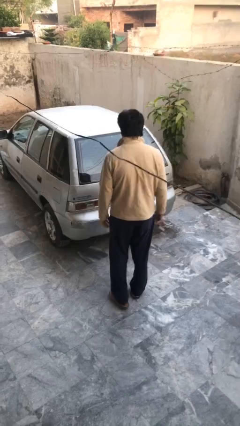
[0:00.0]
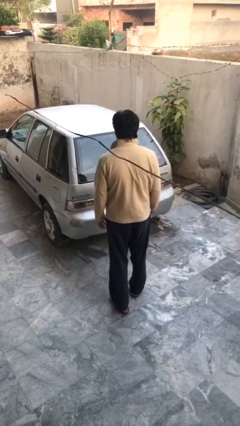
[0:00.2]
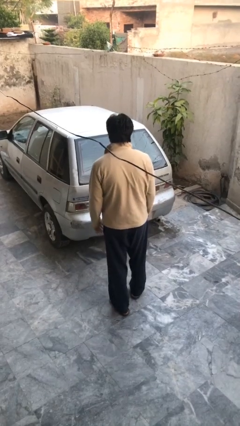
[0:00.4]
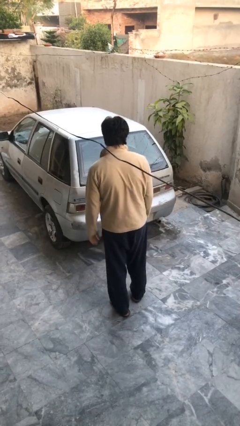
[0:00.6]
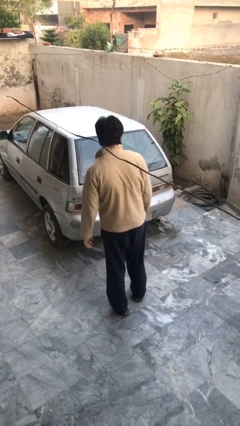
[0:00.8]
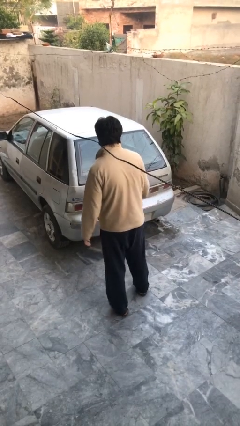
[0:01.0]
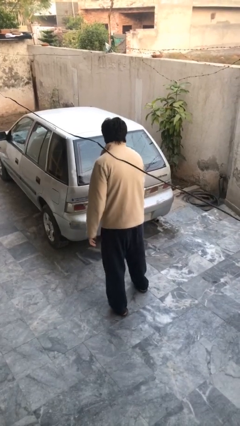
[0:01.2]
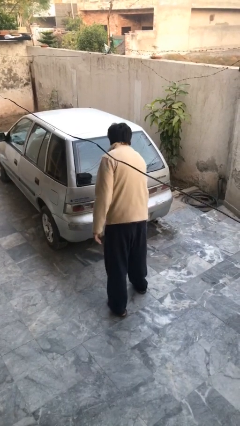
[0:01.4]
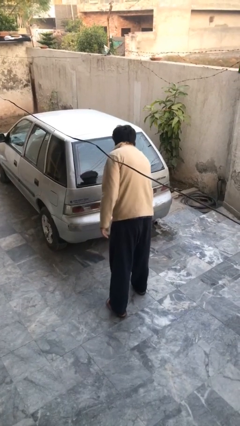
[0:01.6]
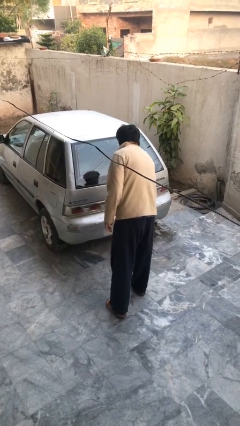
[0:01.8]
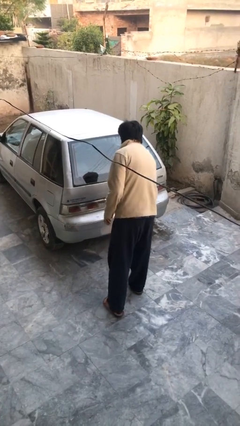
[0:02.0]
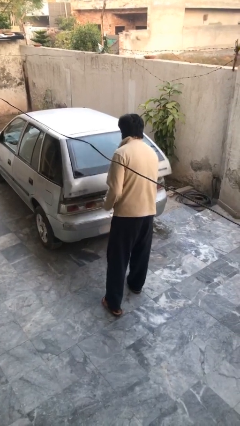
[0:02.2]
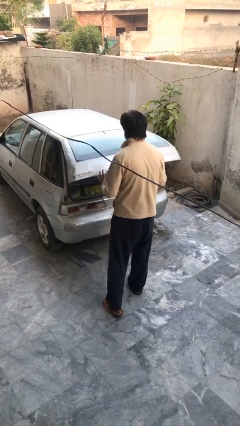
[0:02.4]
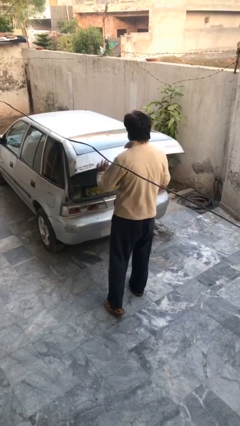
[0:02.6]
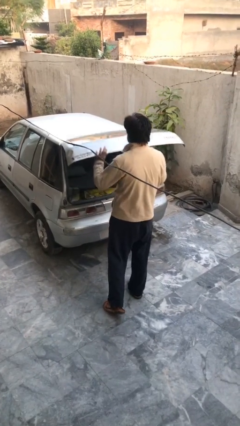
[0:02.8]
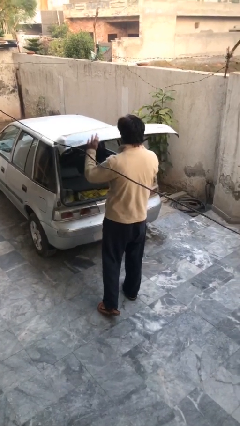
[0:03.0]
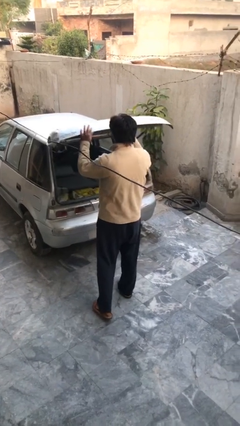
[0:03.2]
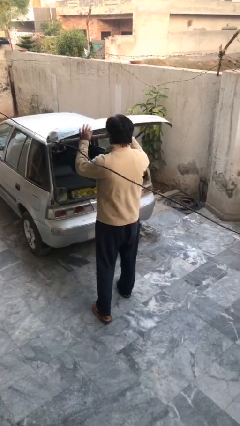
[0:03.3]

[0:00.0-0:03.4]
person opens car trunk

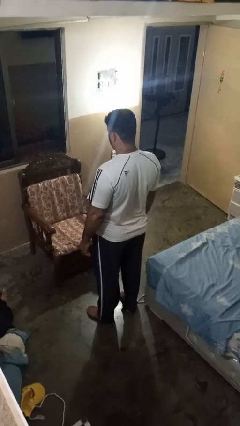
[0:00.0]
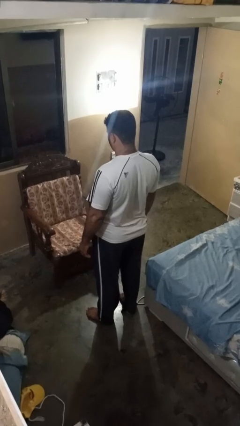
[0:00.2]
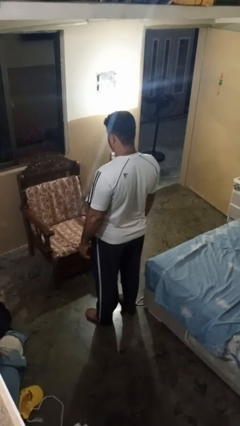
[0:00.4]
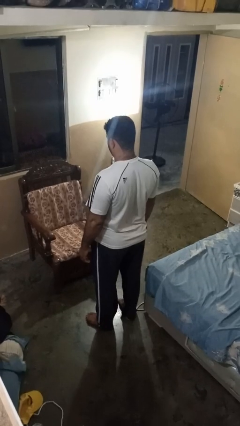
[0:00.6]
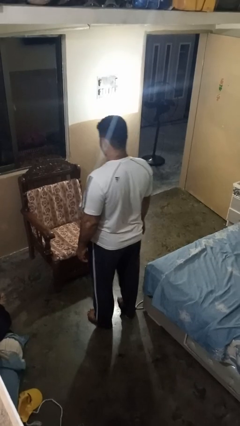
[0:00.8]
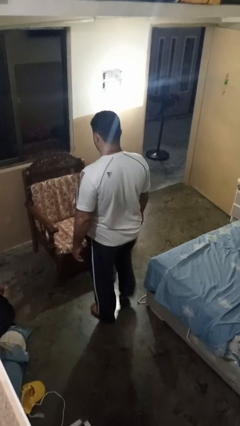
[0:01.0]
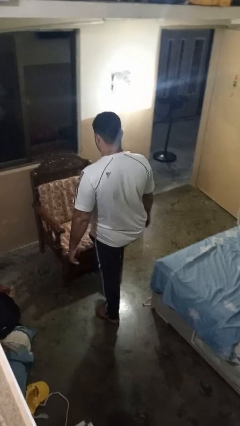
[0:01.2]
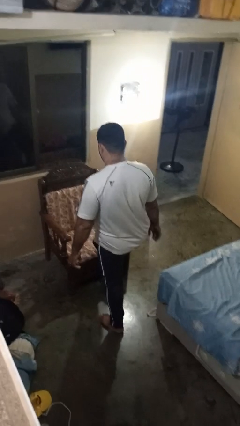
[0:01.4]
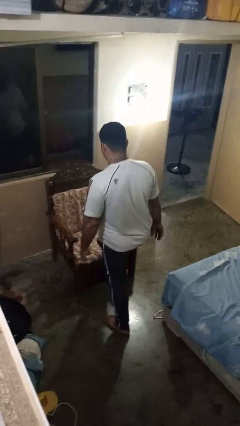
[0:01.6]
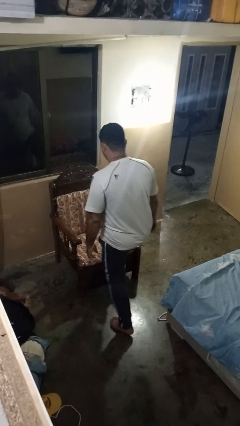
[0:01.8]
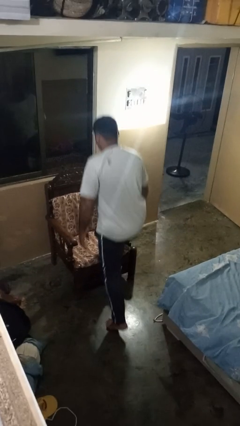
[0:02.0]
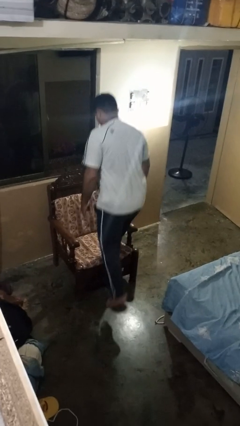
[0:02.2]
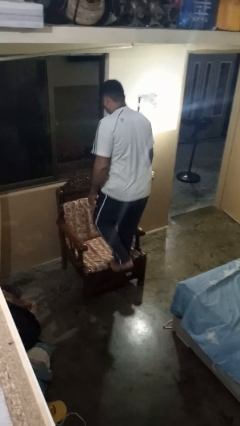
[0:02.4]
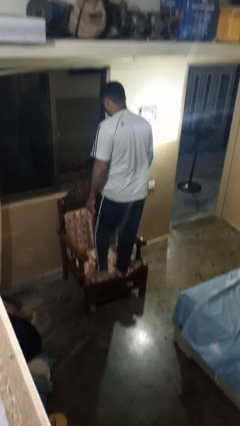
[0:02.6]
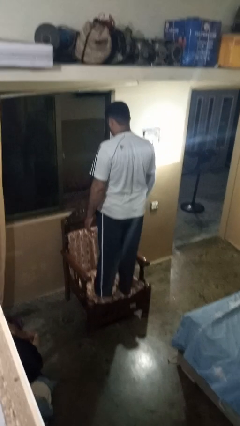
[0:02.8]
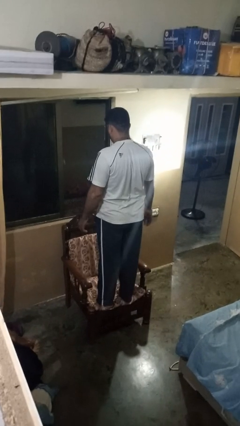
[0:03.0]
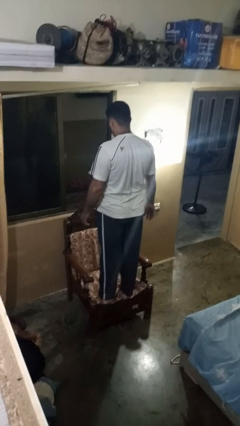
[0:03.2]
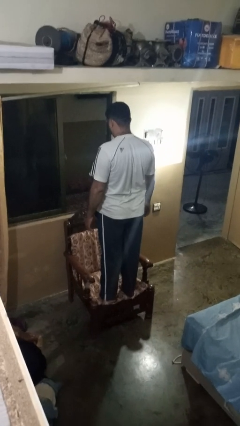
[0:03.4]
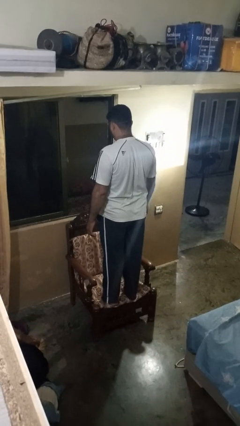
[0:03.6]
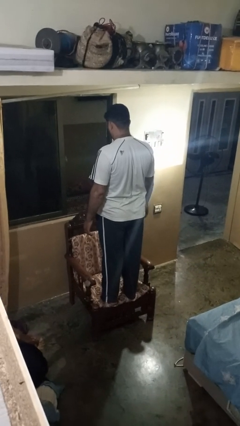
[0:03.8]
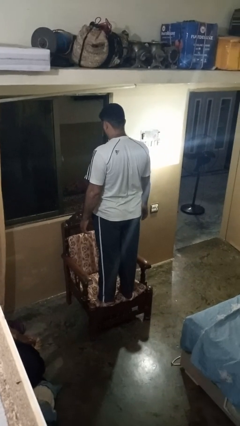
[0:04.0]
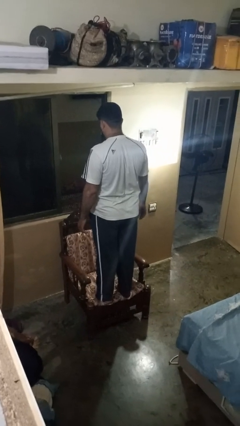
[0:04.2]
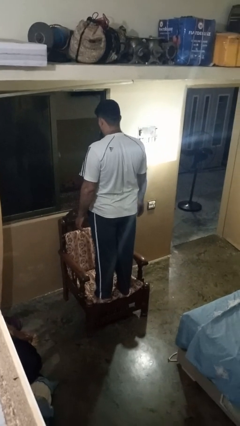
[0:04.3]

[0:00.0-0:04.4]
person climbs on chair

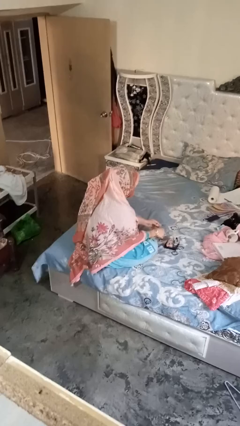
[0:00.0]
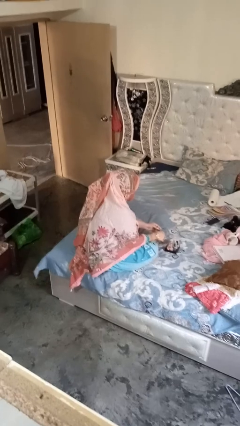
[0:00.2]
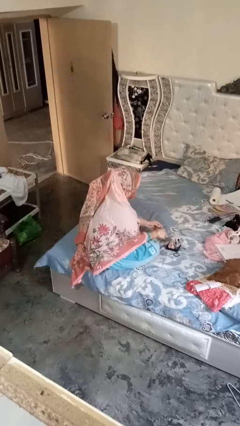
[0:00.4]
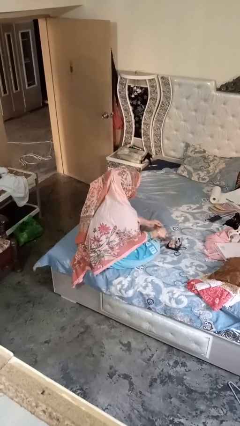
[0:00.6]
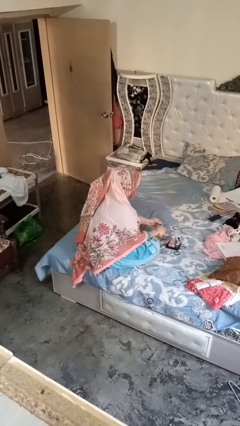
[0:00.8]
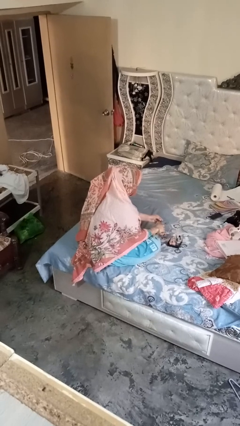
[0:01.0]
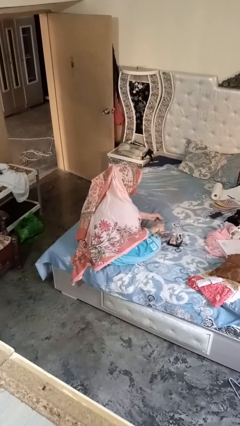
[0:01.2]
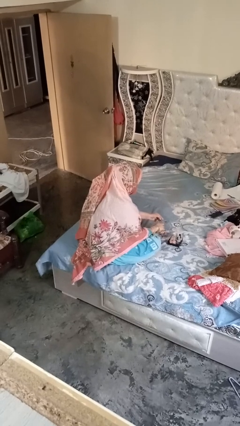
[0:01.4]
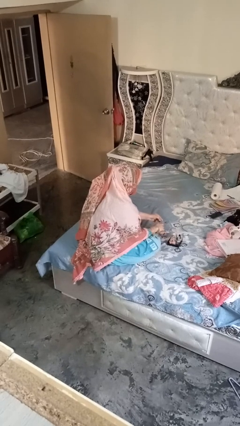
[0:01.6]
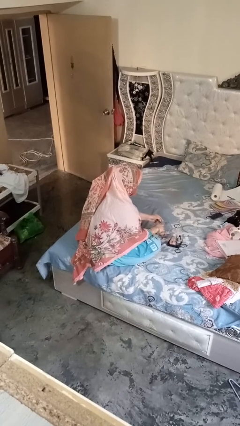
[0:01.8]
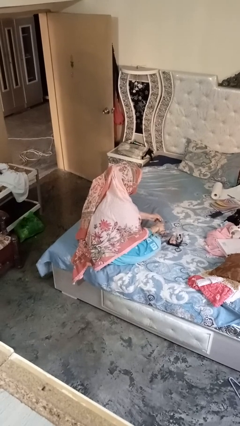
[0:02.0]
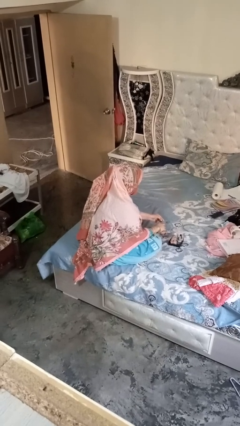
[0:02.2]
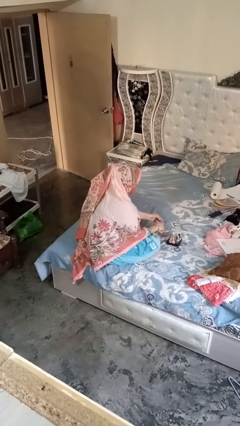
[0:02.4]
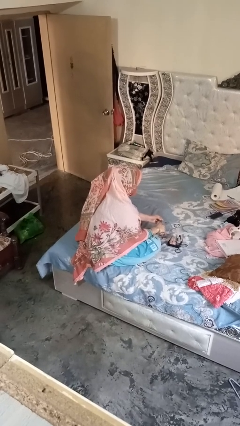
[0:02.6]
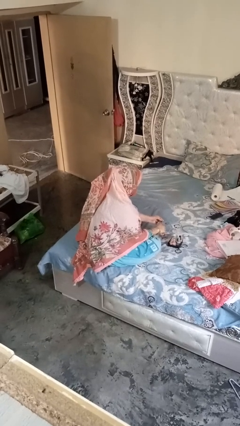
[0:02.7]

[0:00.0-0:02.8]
person paints fingernails

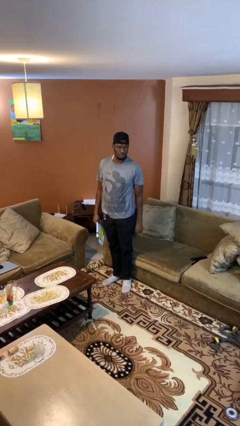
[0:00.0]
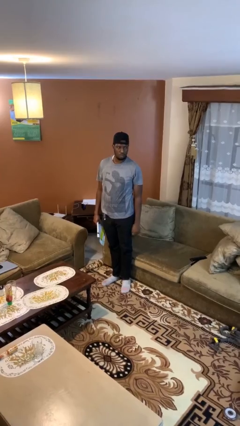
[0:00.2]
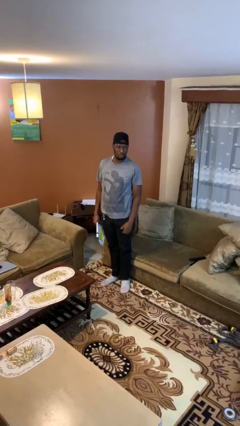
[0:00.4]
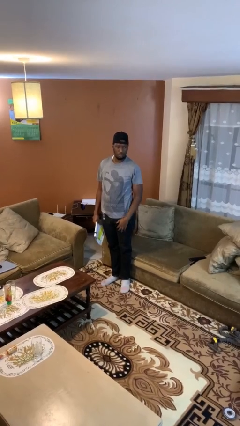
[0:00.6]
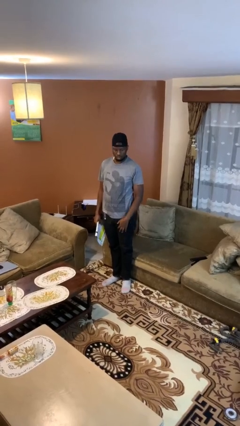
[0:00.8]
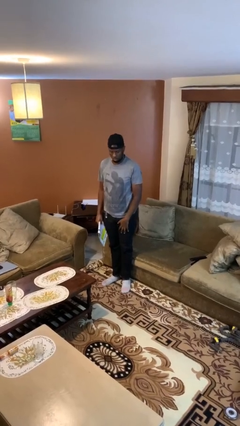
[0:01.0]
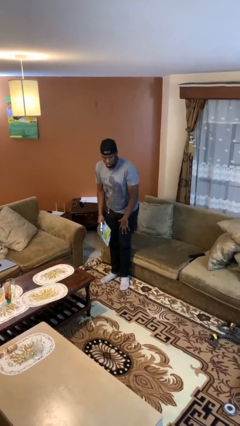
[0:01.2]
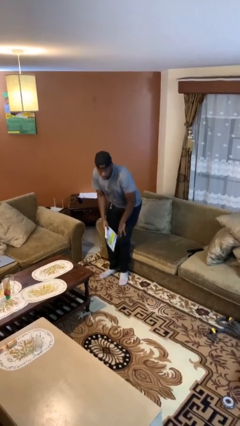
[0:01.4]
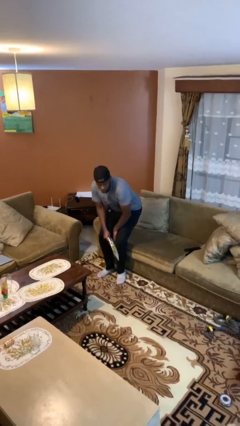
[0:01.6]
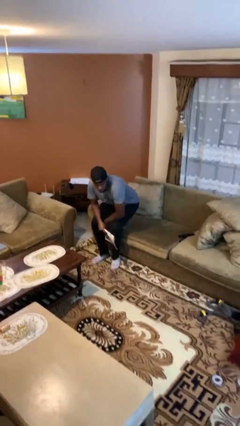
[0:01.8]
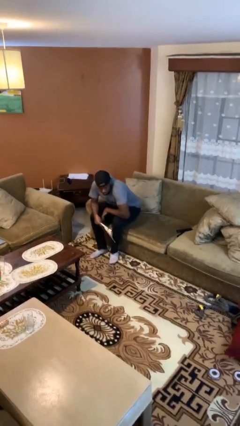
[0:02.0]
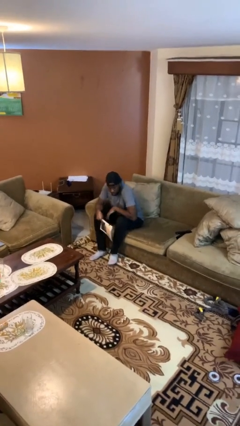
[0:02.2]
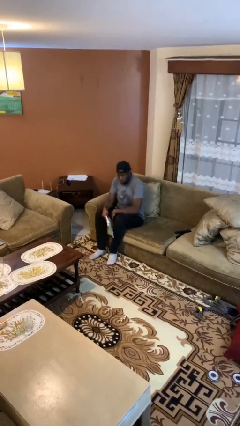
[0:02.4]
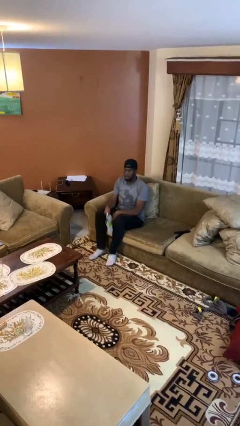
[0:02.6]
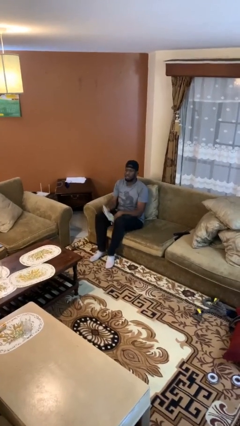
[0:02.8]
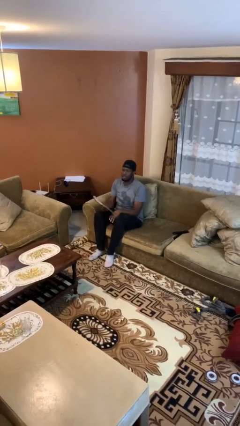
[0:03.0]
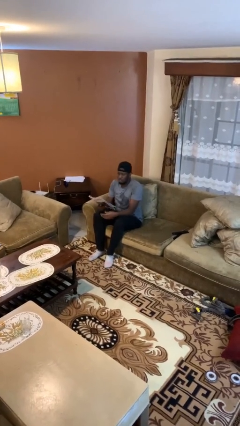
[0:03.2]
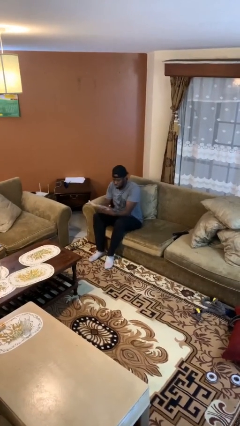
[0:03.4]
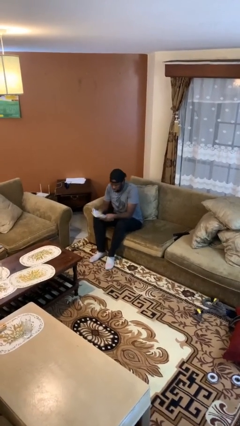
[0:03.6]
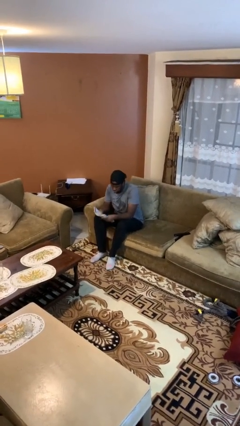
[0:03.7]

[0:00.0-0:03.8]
person sits down

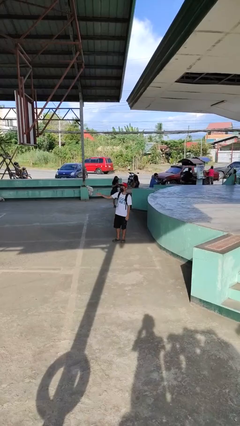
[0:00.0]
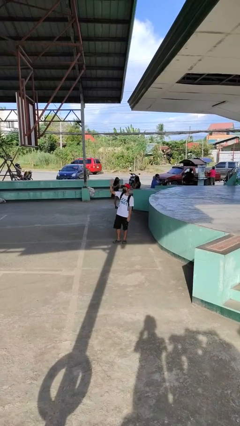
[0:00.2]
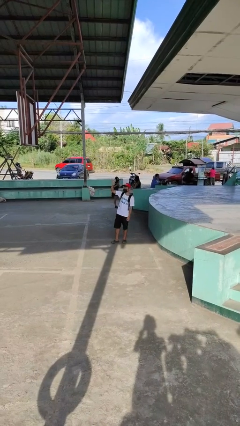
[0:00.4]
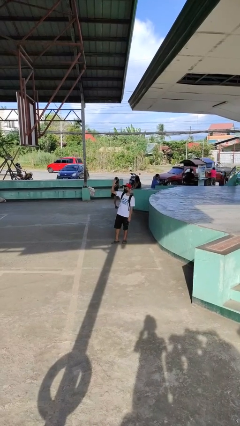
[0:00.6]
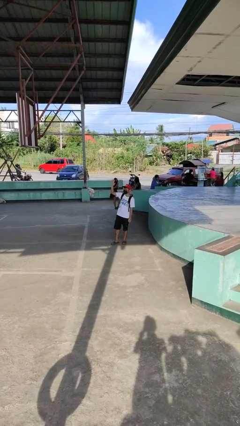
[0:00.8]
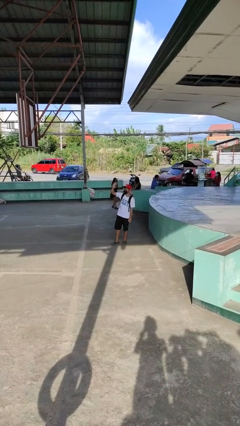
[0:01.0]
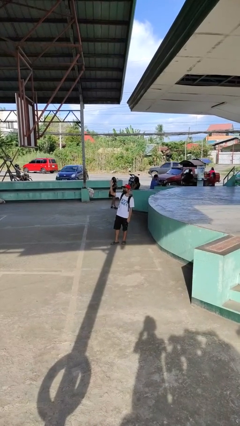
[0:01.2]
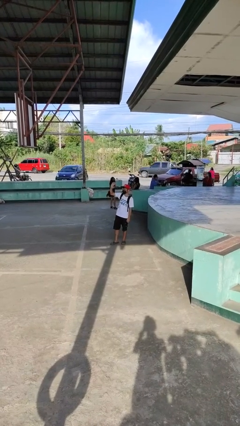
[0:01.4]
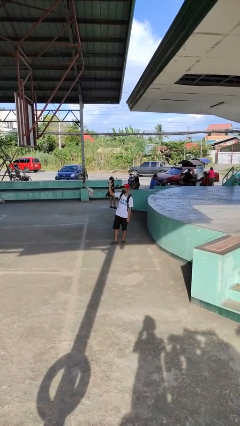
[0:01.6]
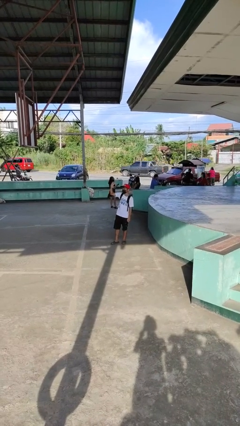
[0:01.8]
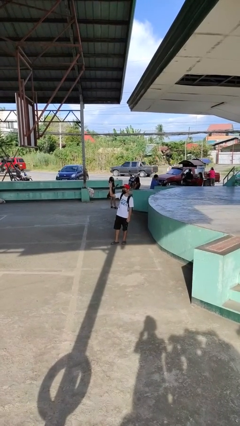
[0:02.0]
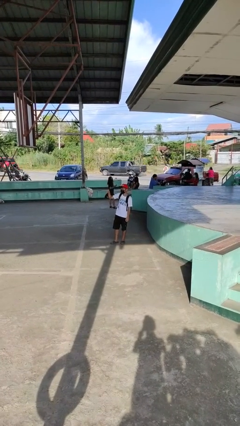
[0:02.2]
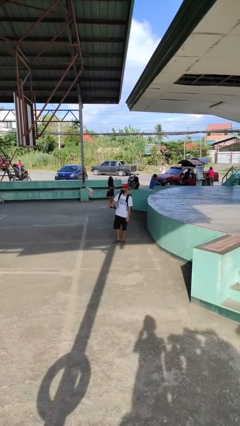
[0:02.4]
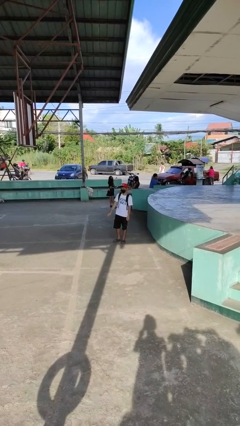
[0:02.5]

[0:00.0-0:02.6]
person waves at person

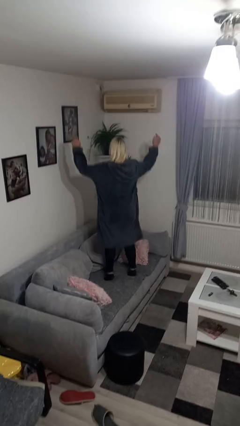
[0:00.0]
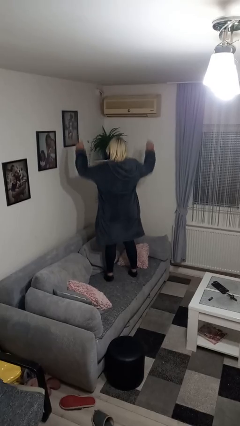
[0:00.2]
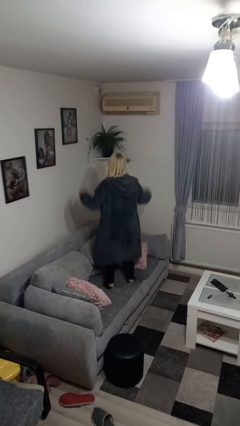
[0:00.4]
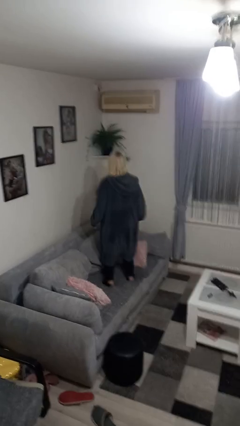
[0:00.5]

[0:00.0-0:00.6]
person jumps on couch

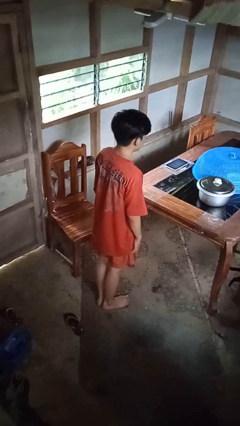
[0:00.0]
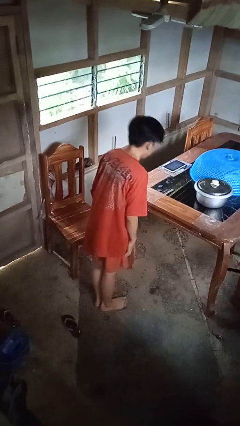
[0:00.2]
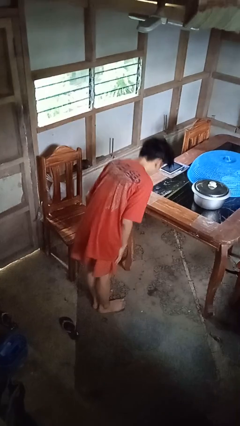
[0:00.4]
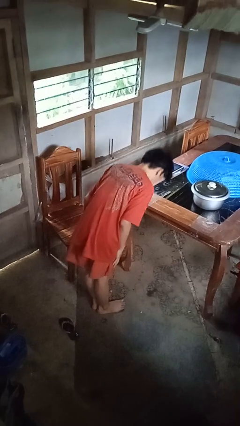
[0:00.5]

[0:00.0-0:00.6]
person bows
